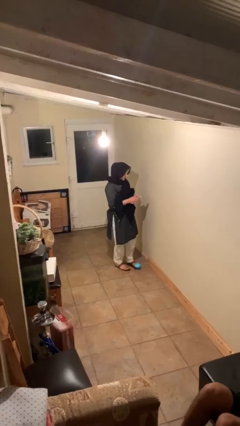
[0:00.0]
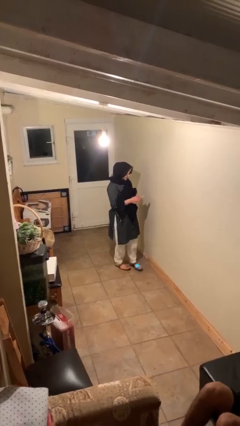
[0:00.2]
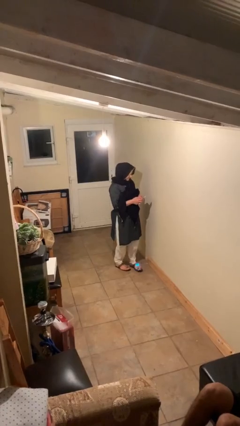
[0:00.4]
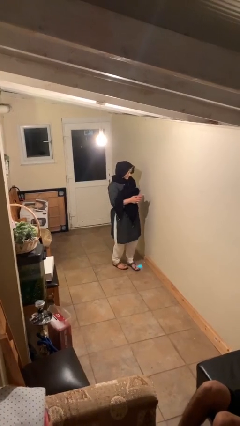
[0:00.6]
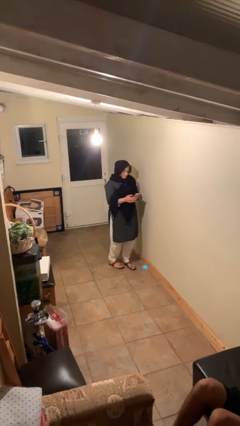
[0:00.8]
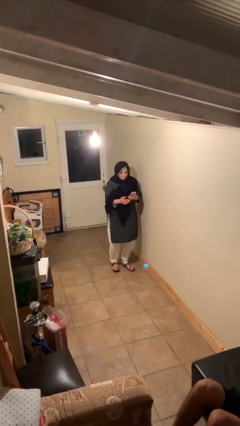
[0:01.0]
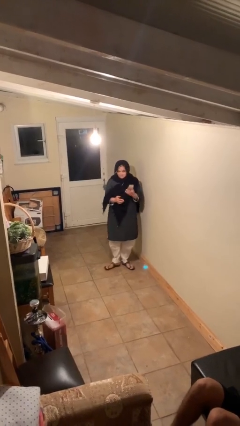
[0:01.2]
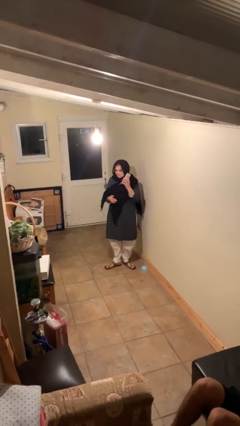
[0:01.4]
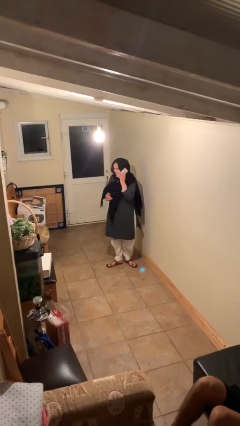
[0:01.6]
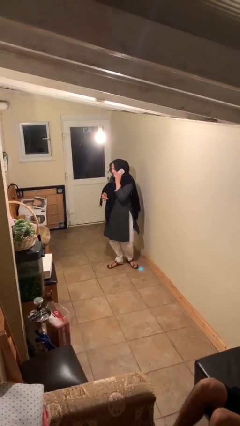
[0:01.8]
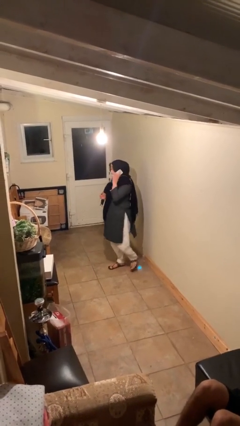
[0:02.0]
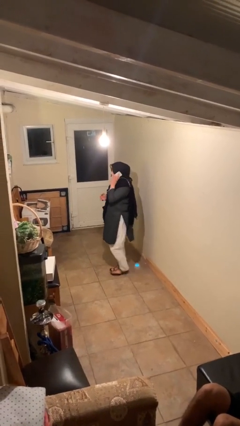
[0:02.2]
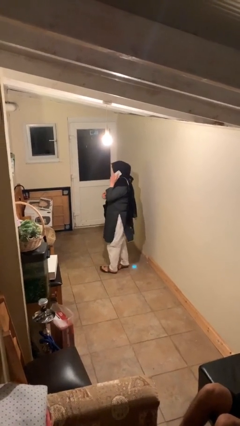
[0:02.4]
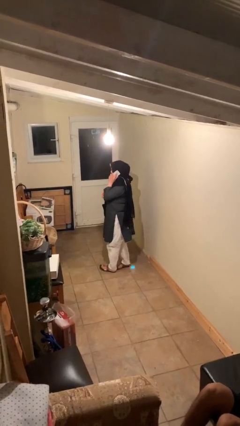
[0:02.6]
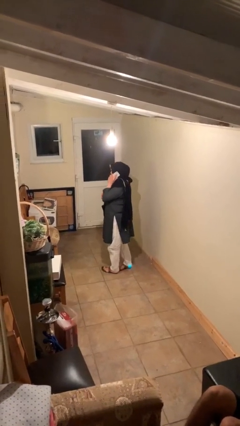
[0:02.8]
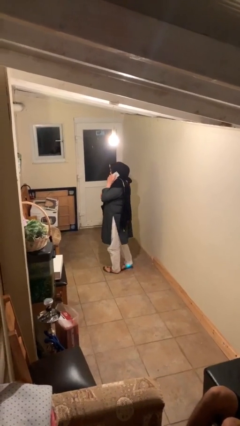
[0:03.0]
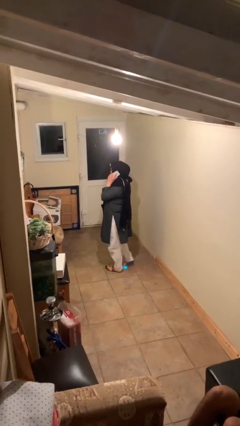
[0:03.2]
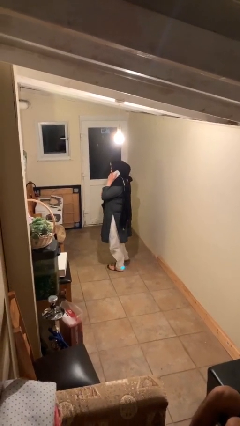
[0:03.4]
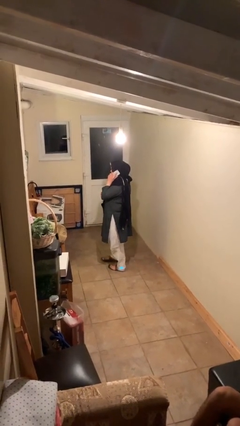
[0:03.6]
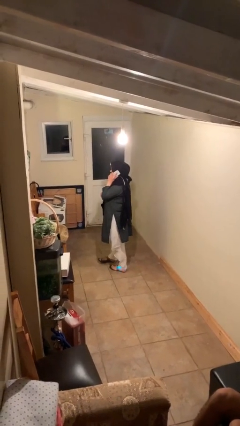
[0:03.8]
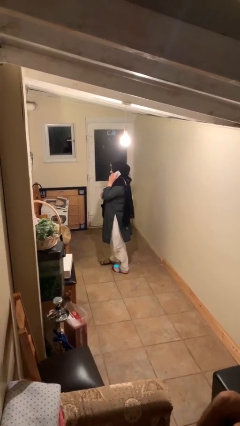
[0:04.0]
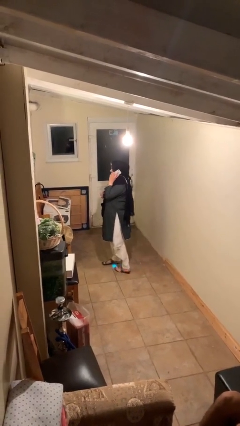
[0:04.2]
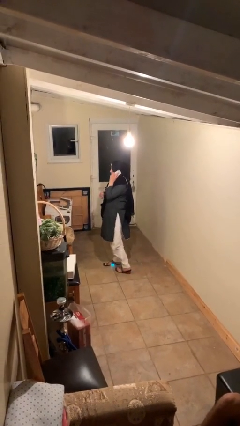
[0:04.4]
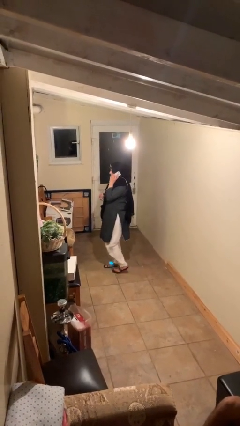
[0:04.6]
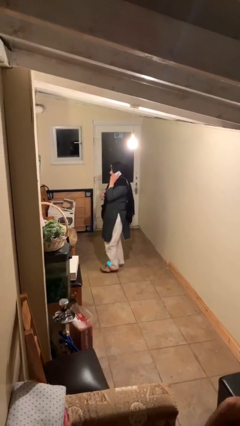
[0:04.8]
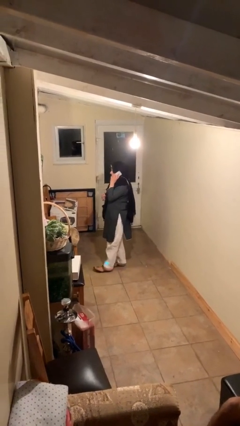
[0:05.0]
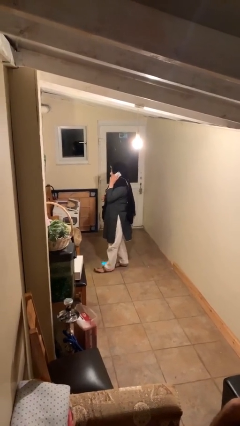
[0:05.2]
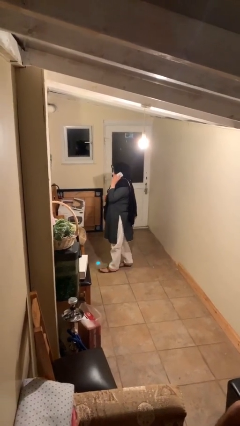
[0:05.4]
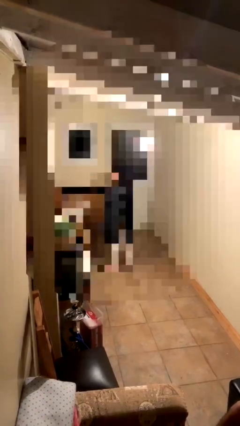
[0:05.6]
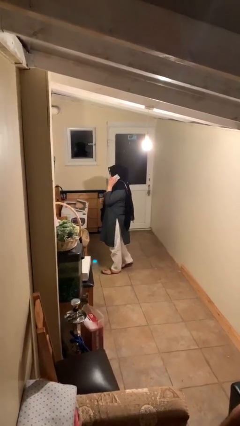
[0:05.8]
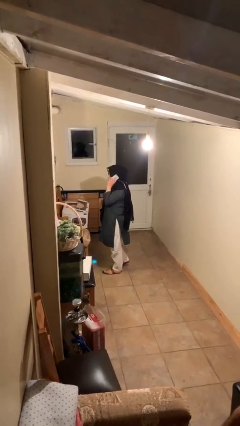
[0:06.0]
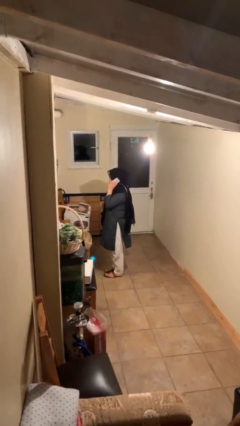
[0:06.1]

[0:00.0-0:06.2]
person talks on phone

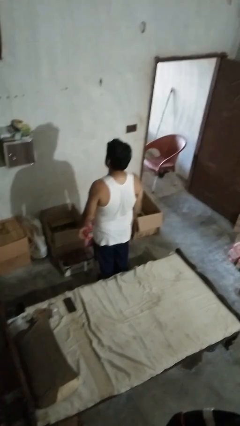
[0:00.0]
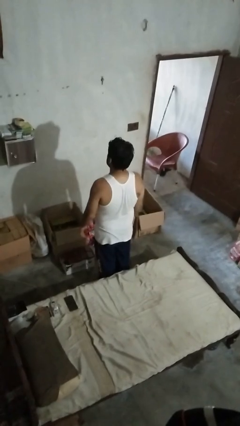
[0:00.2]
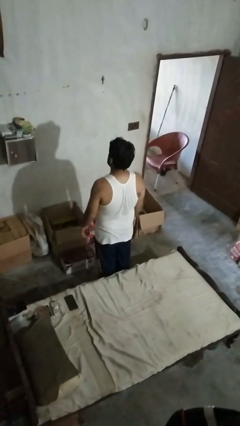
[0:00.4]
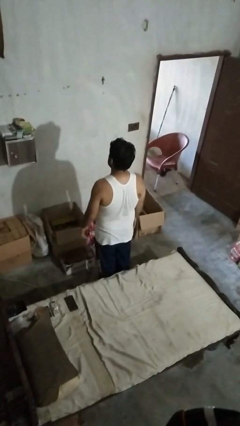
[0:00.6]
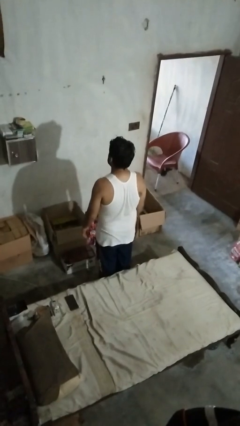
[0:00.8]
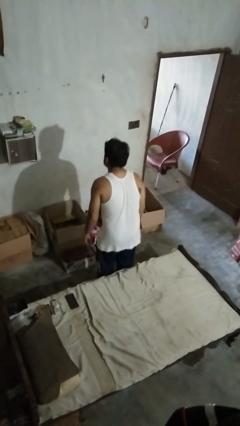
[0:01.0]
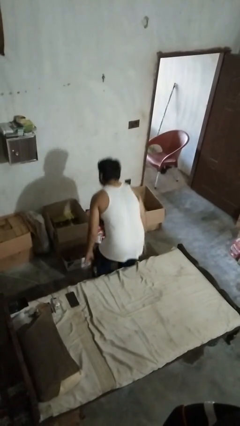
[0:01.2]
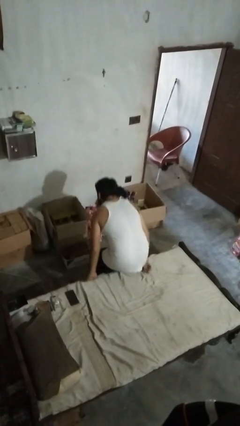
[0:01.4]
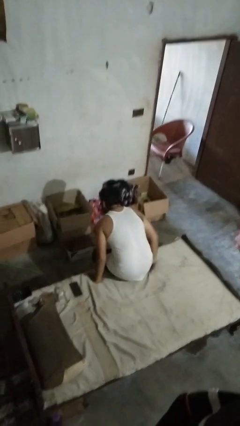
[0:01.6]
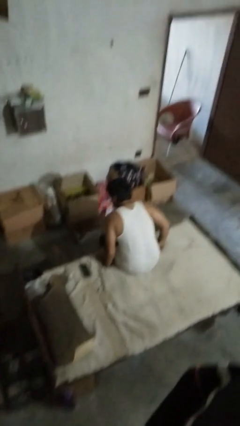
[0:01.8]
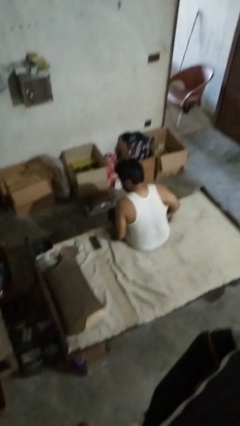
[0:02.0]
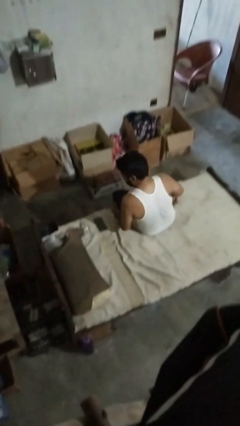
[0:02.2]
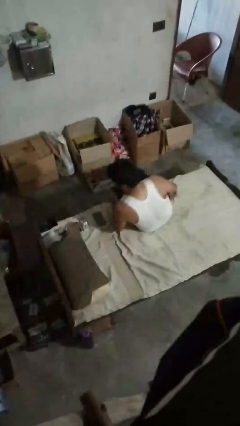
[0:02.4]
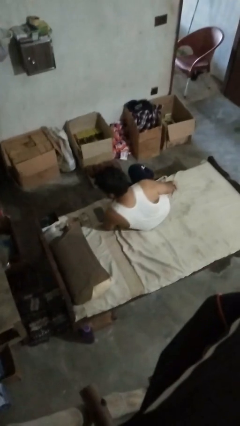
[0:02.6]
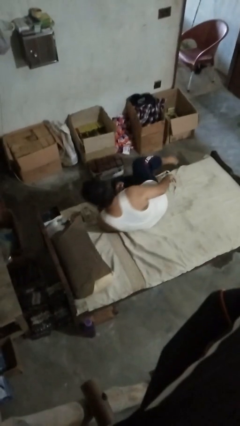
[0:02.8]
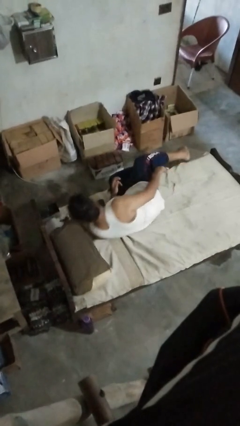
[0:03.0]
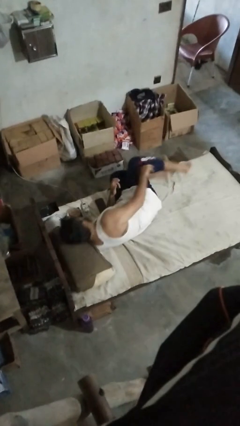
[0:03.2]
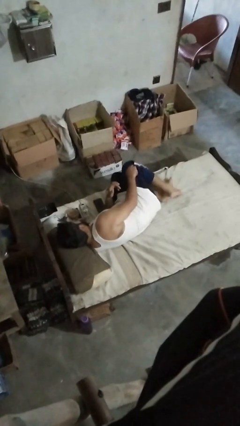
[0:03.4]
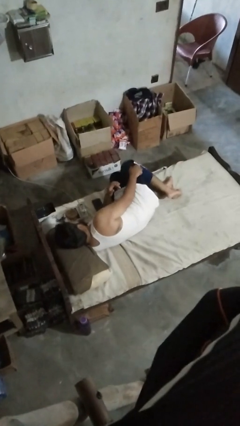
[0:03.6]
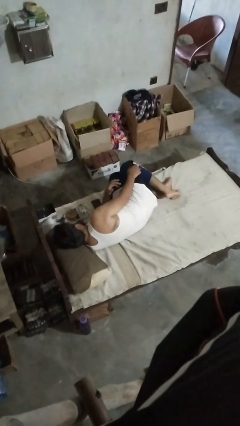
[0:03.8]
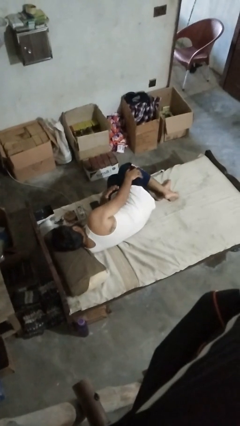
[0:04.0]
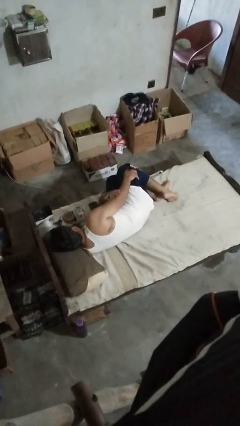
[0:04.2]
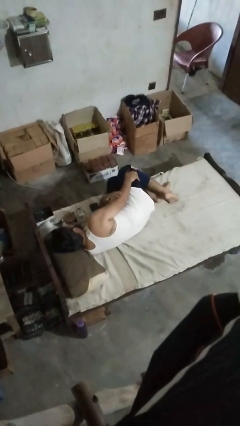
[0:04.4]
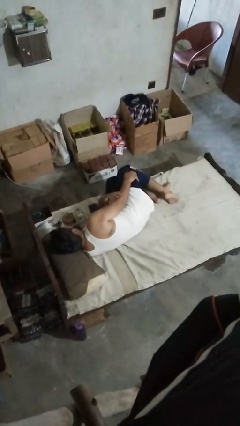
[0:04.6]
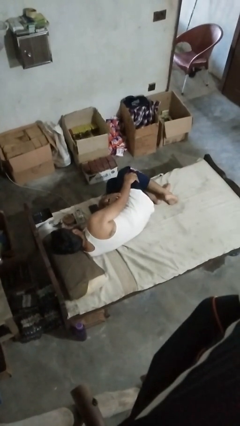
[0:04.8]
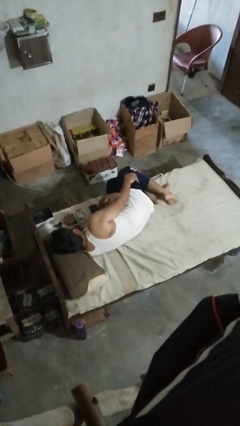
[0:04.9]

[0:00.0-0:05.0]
person lies down on bed

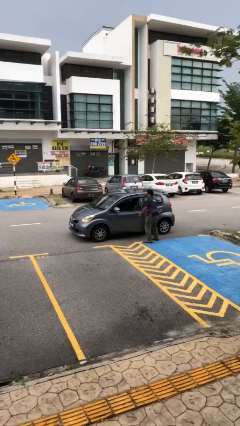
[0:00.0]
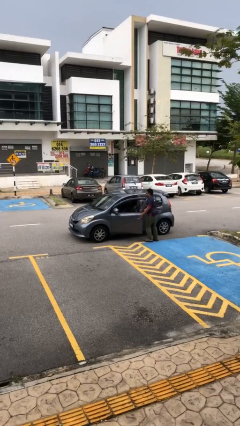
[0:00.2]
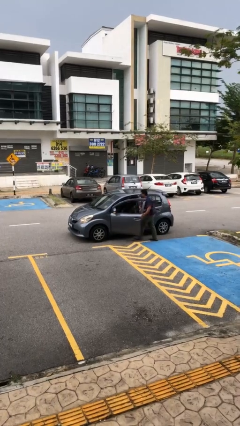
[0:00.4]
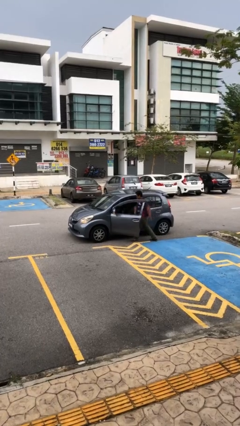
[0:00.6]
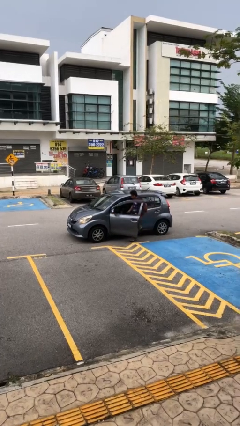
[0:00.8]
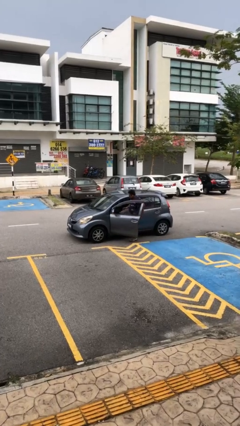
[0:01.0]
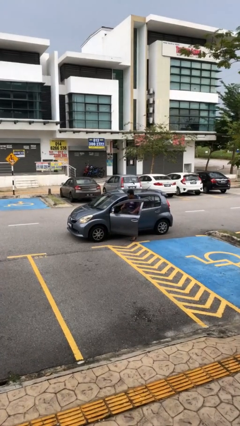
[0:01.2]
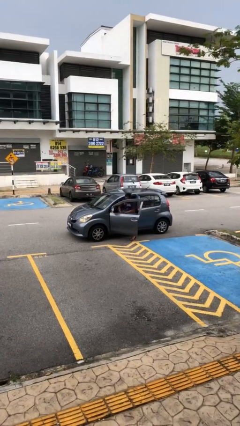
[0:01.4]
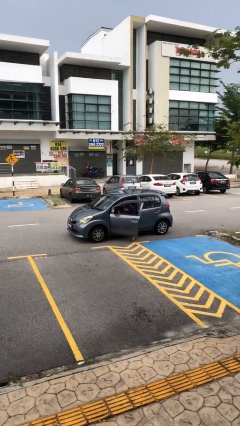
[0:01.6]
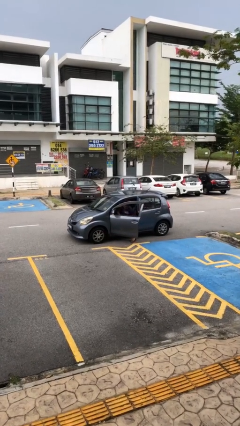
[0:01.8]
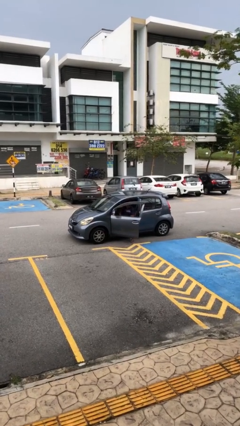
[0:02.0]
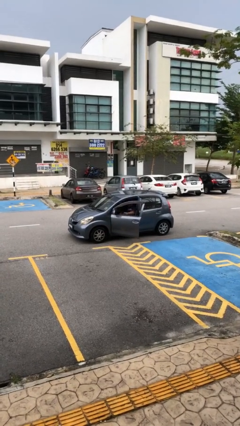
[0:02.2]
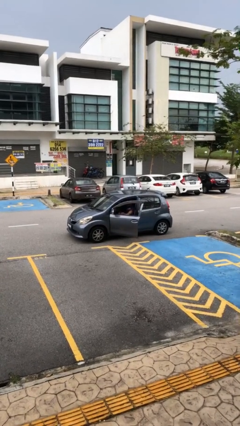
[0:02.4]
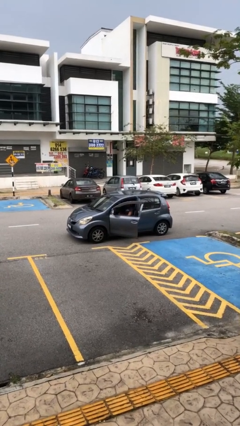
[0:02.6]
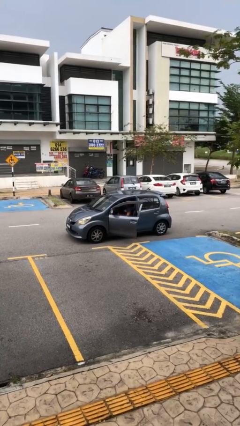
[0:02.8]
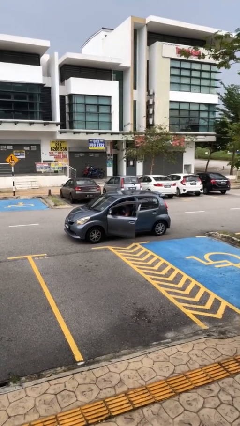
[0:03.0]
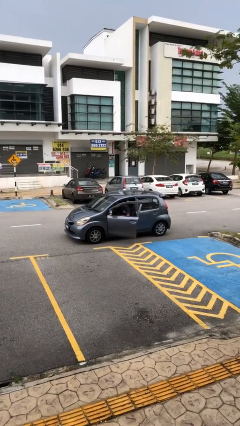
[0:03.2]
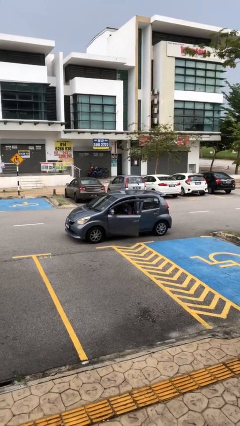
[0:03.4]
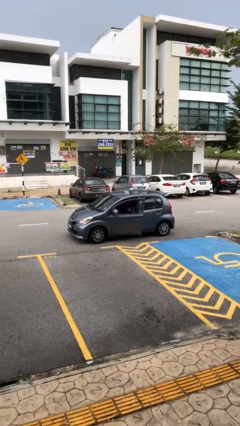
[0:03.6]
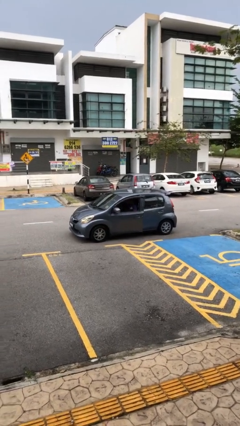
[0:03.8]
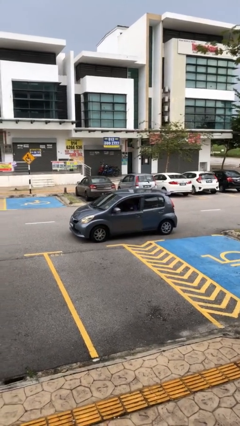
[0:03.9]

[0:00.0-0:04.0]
car picks up person

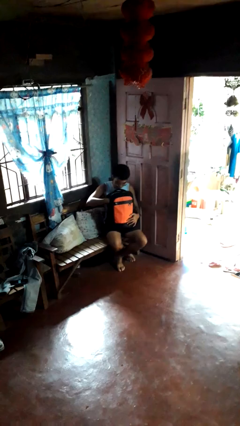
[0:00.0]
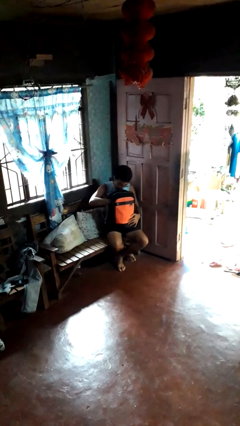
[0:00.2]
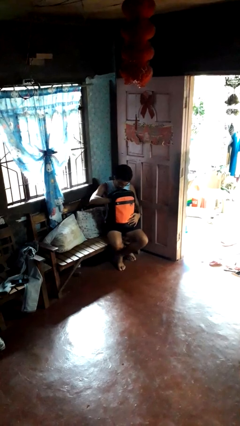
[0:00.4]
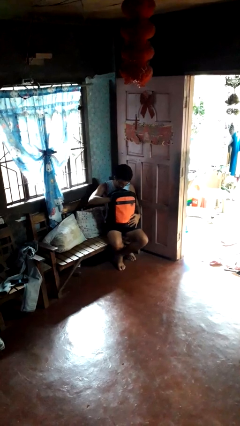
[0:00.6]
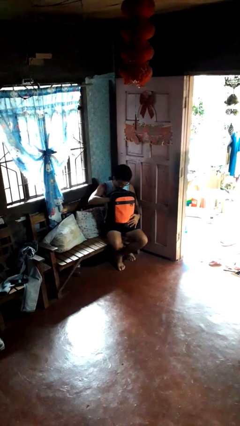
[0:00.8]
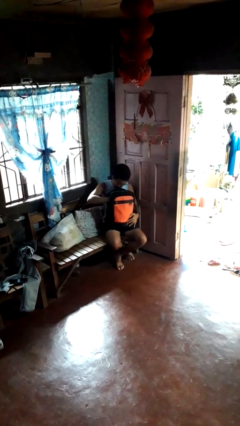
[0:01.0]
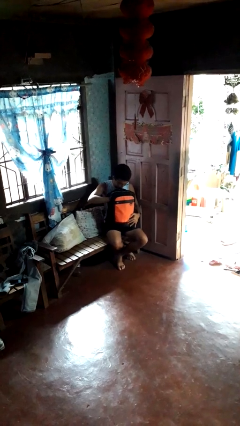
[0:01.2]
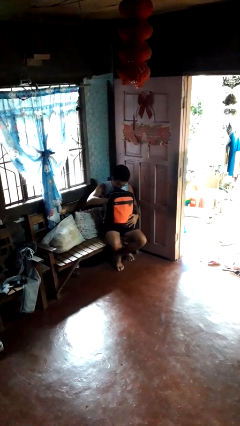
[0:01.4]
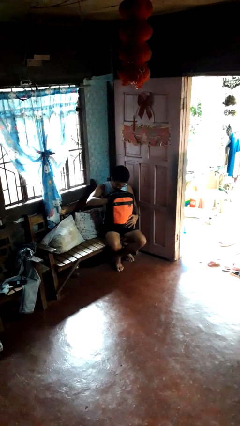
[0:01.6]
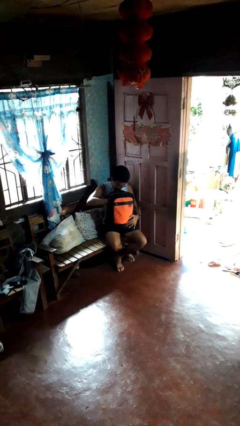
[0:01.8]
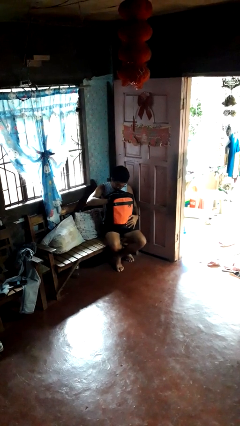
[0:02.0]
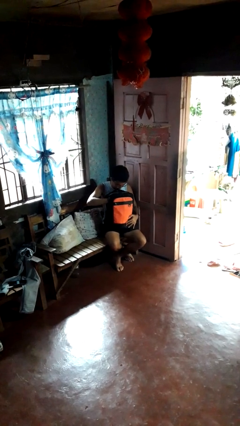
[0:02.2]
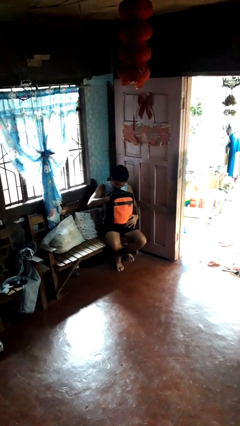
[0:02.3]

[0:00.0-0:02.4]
person searches in bag
